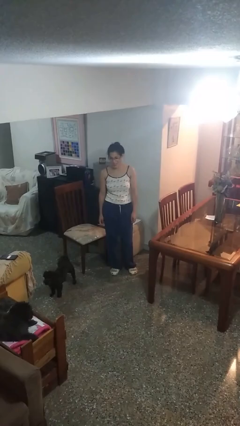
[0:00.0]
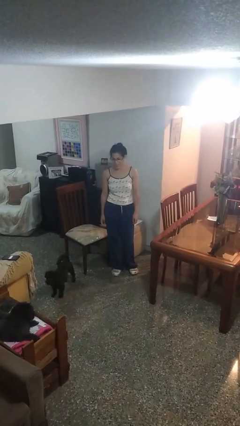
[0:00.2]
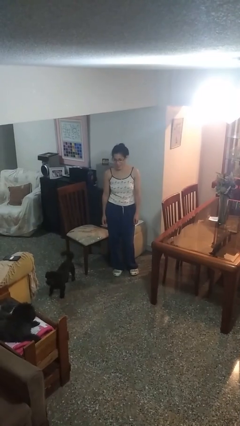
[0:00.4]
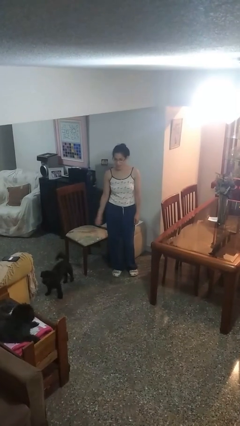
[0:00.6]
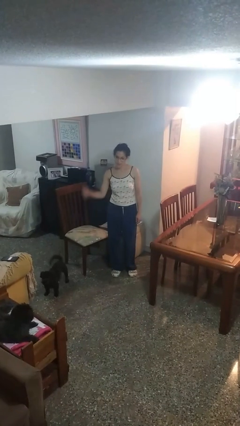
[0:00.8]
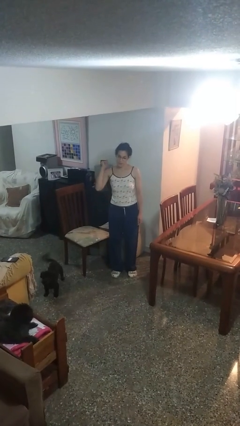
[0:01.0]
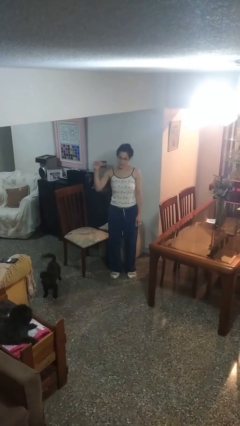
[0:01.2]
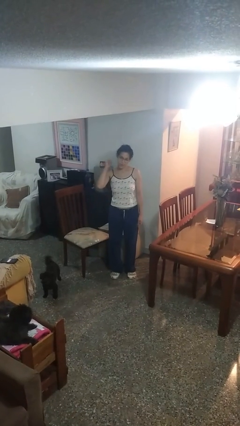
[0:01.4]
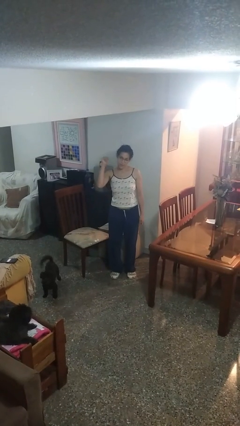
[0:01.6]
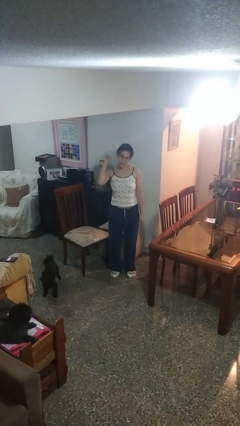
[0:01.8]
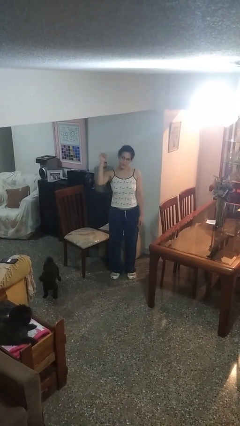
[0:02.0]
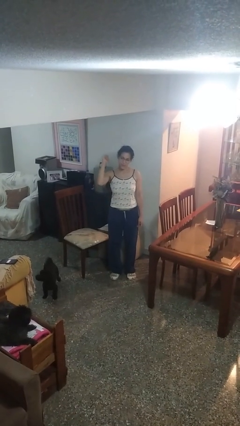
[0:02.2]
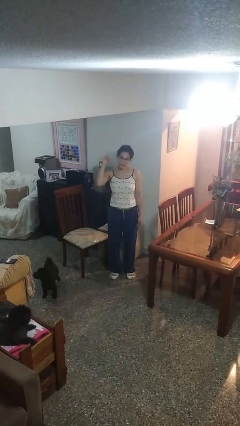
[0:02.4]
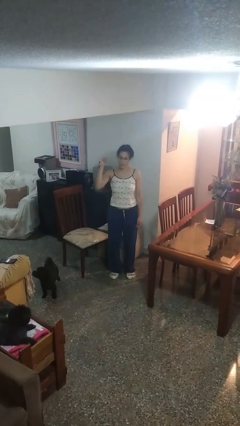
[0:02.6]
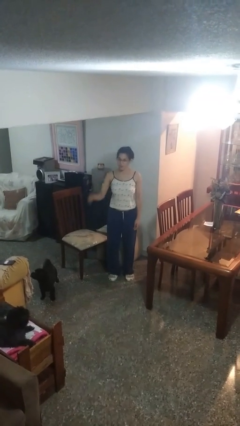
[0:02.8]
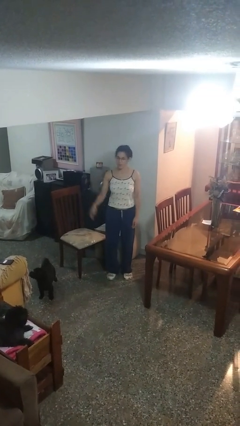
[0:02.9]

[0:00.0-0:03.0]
person gestures behind me

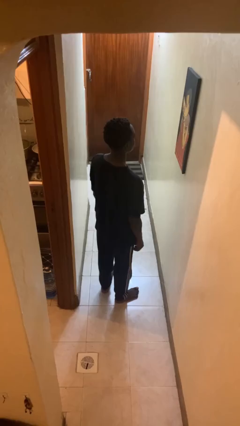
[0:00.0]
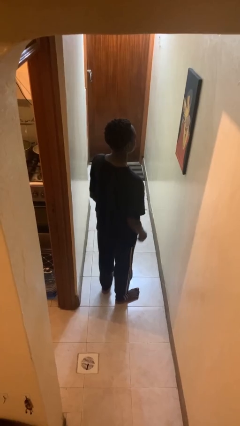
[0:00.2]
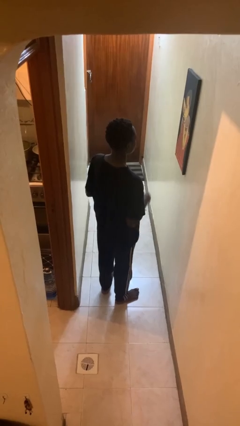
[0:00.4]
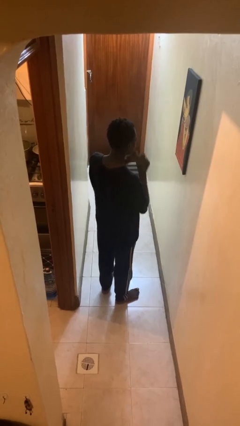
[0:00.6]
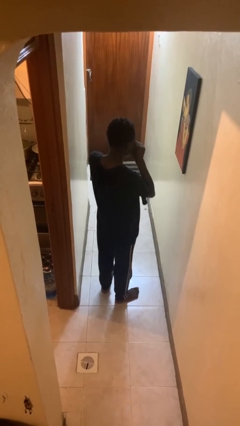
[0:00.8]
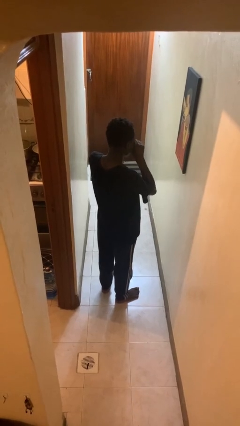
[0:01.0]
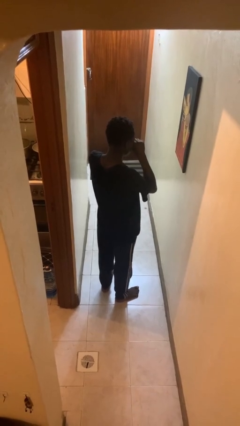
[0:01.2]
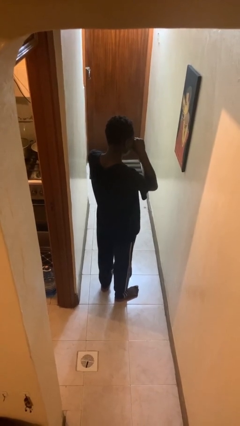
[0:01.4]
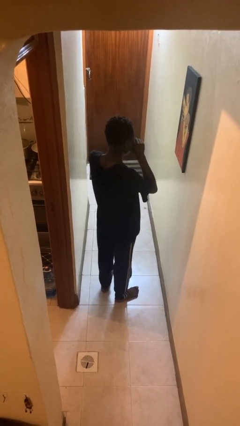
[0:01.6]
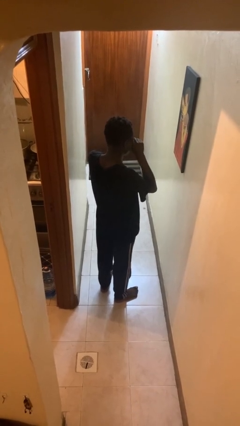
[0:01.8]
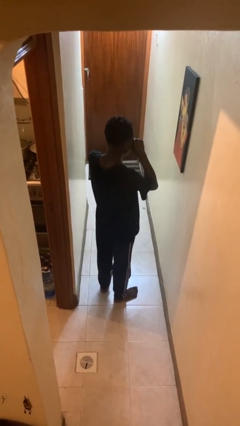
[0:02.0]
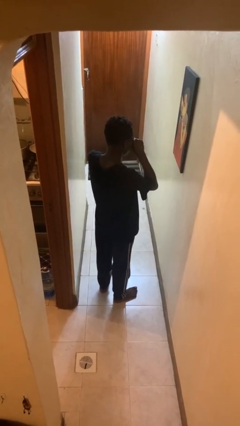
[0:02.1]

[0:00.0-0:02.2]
person rubs eyes

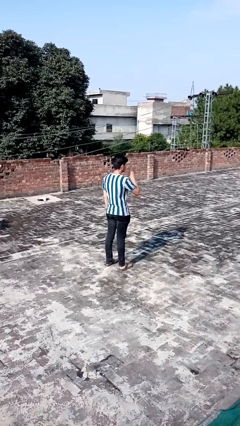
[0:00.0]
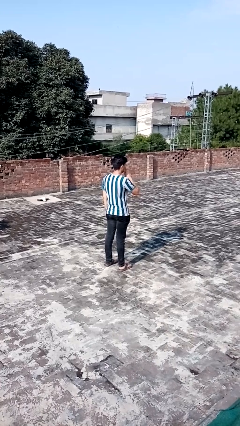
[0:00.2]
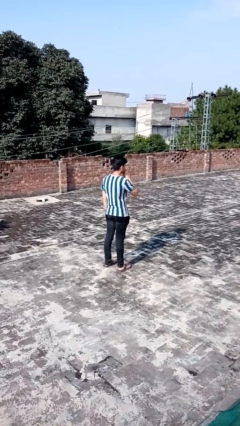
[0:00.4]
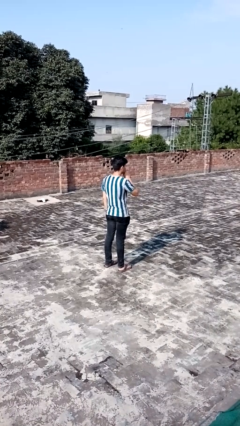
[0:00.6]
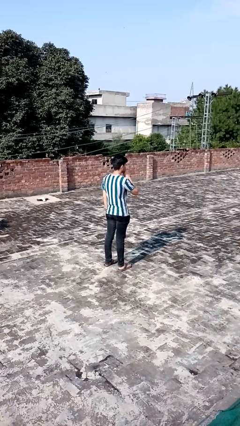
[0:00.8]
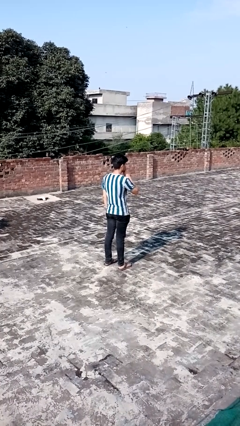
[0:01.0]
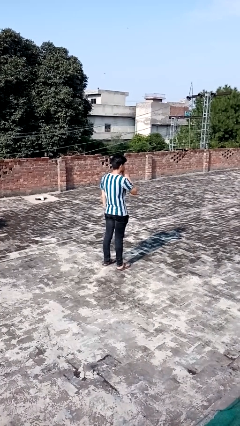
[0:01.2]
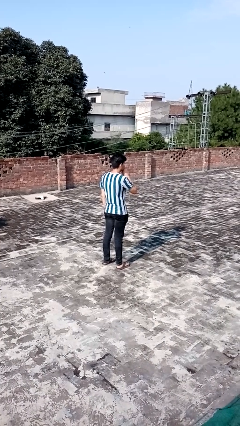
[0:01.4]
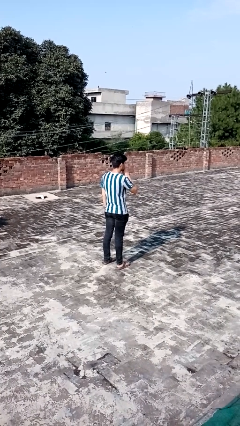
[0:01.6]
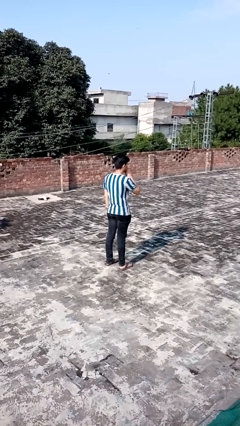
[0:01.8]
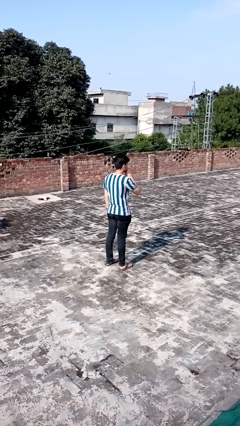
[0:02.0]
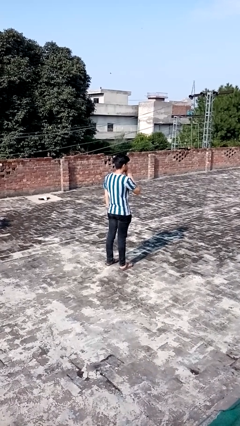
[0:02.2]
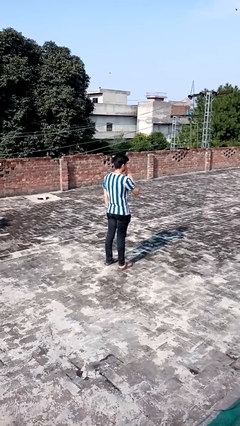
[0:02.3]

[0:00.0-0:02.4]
person gestures be quiet

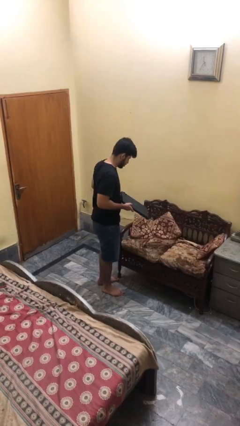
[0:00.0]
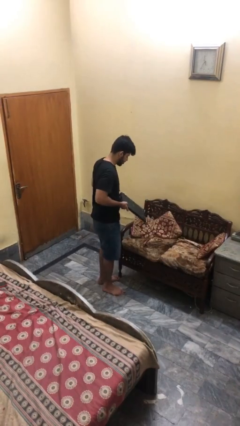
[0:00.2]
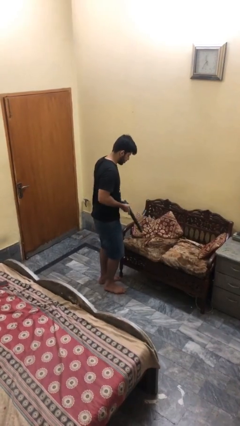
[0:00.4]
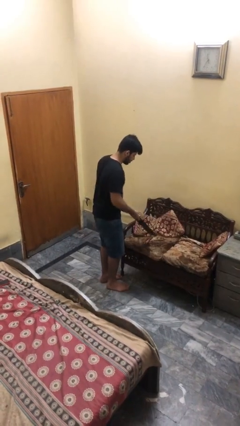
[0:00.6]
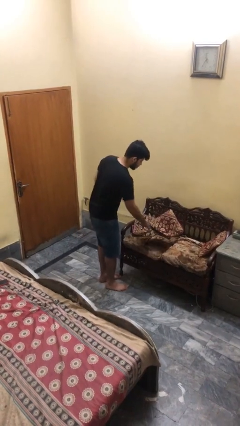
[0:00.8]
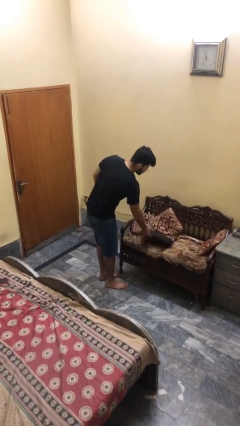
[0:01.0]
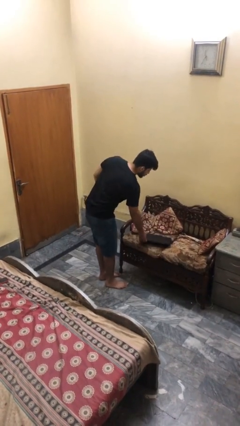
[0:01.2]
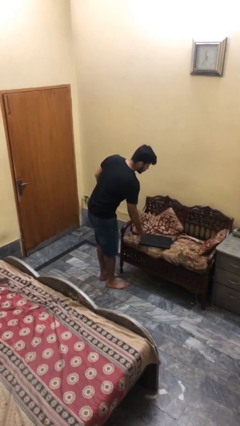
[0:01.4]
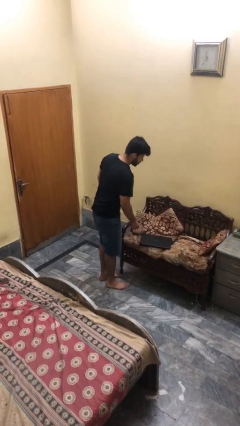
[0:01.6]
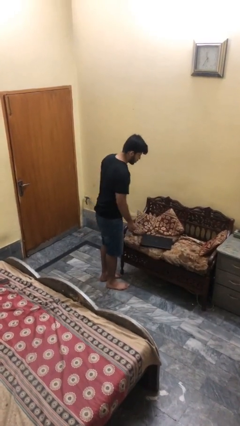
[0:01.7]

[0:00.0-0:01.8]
person puts down object on couch

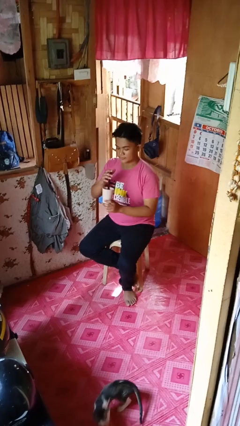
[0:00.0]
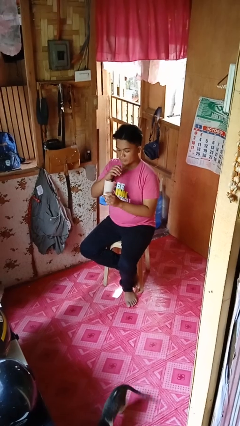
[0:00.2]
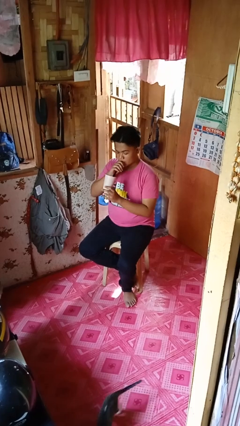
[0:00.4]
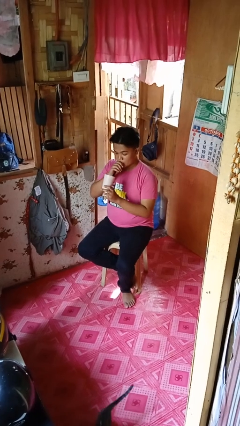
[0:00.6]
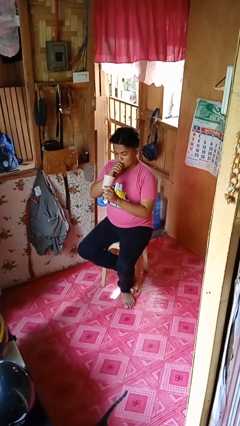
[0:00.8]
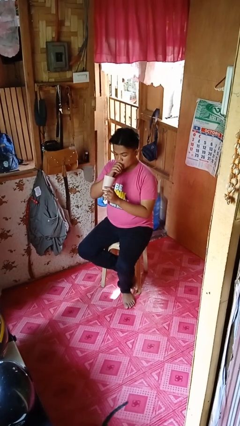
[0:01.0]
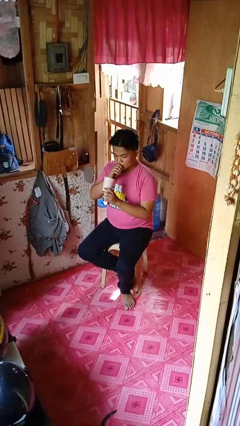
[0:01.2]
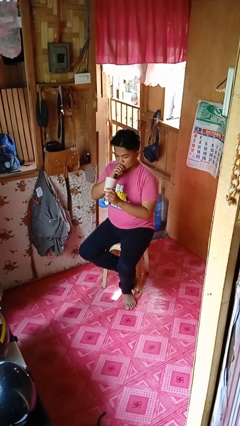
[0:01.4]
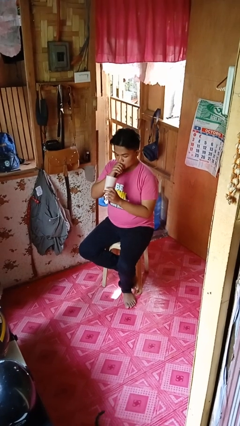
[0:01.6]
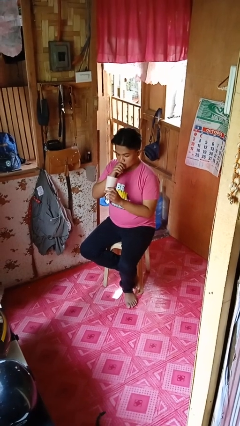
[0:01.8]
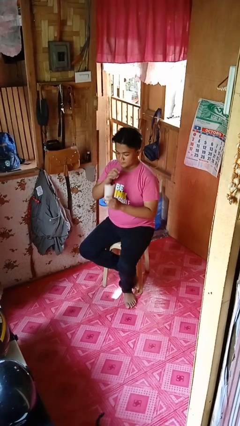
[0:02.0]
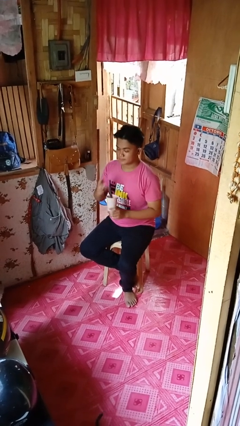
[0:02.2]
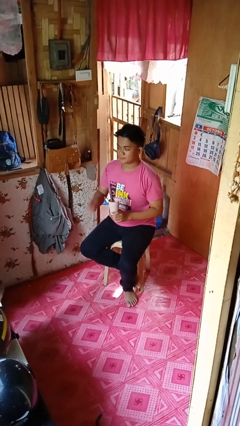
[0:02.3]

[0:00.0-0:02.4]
person drinks from straw

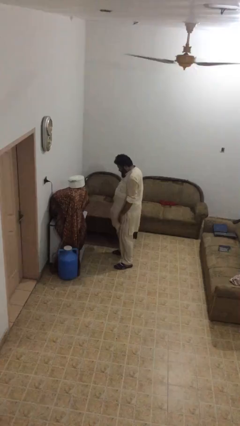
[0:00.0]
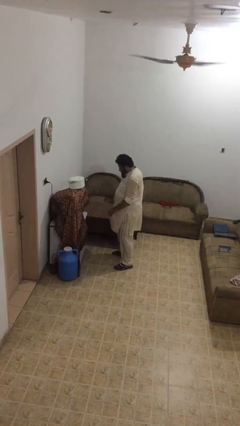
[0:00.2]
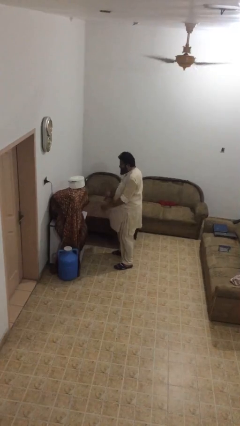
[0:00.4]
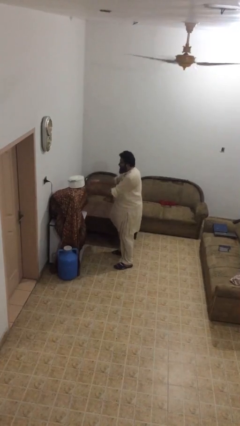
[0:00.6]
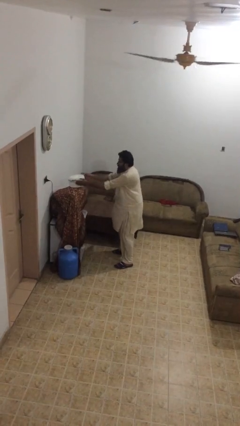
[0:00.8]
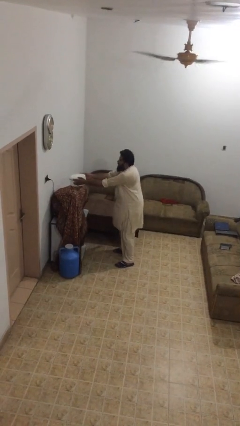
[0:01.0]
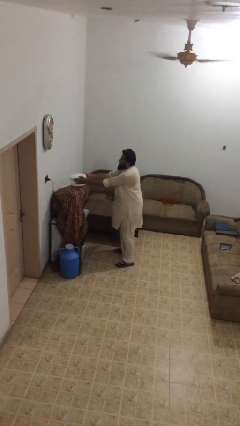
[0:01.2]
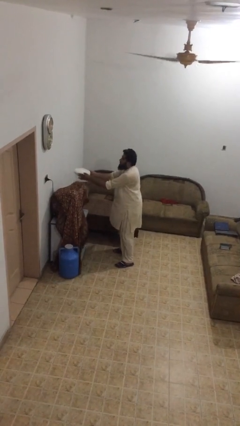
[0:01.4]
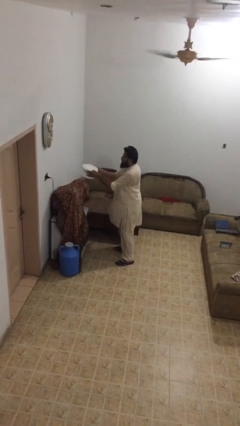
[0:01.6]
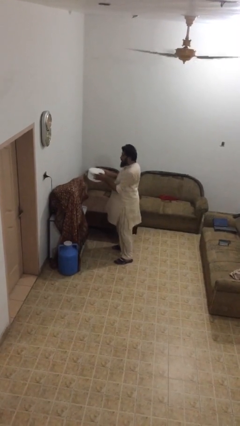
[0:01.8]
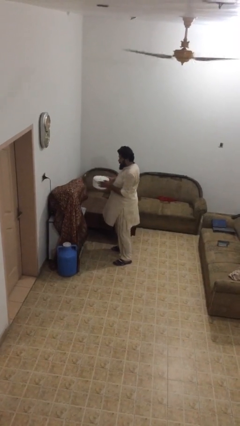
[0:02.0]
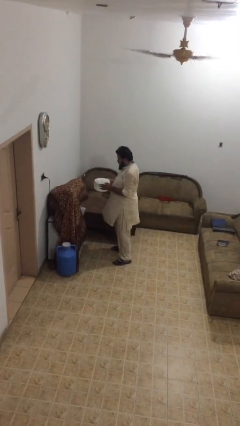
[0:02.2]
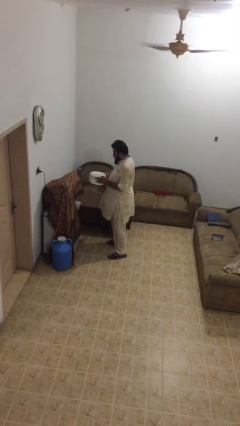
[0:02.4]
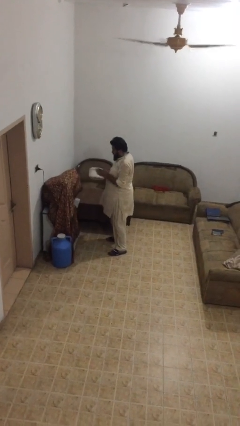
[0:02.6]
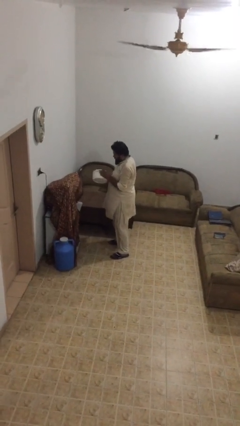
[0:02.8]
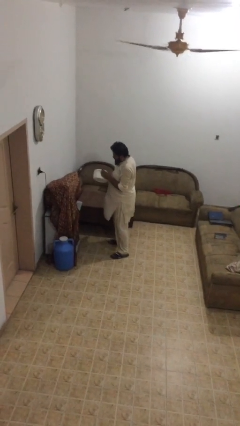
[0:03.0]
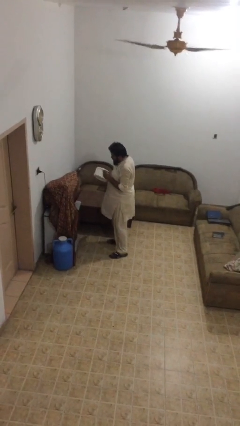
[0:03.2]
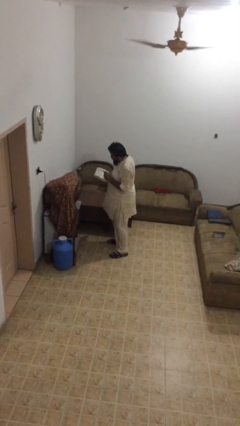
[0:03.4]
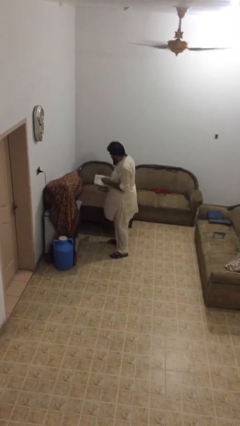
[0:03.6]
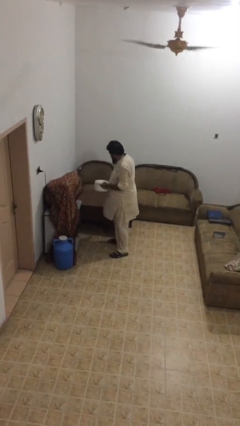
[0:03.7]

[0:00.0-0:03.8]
person picks up object from shelf

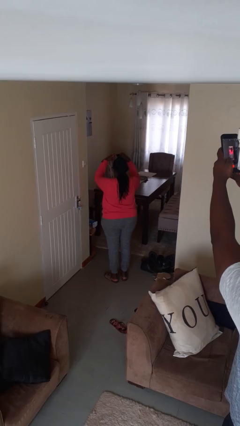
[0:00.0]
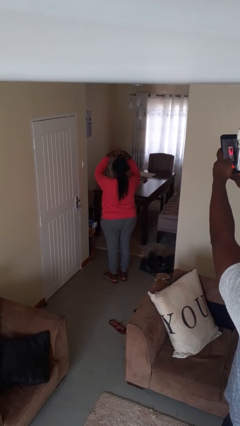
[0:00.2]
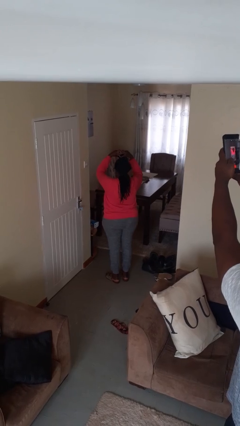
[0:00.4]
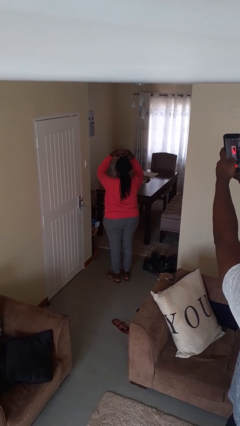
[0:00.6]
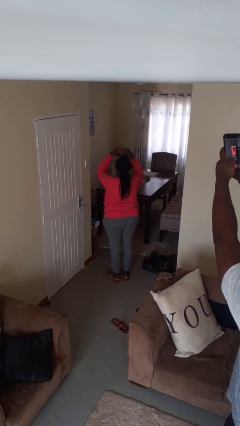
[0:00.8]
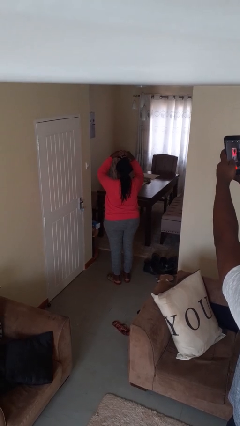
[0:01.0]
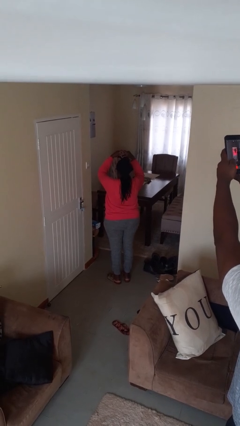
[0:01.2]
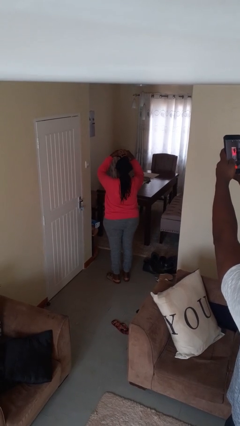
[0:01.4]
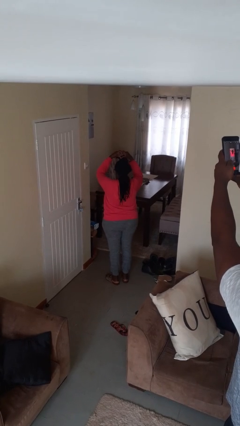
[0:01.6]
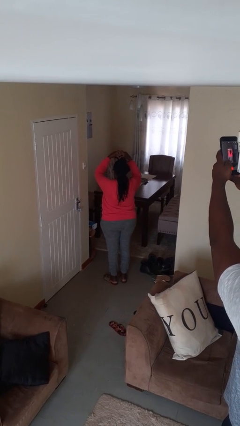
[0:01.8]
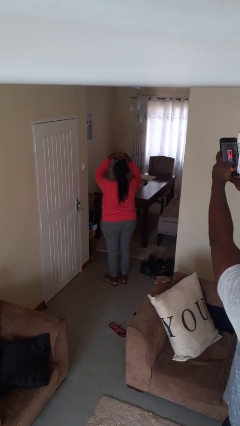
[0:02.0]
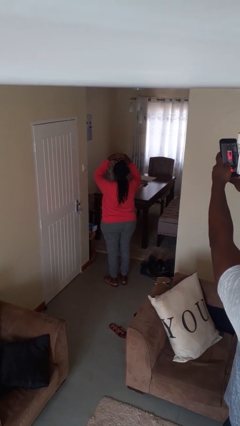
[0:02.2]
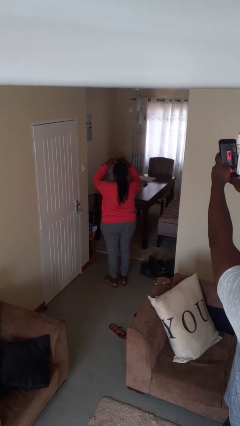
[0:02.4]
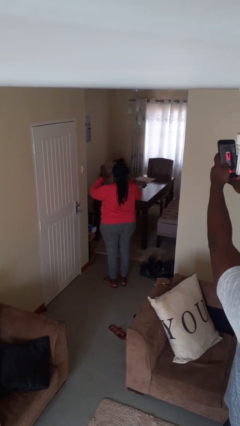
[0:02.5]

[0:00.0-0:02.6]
person gestures heart
